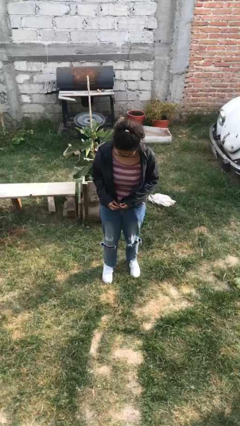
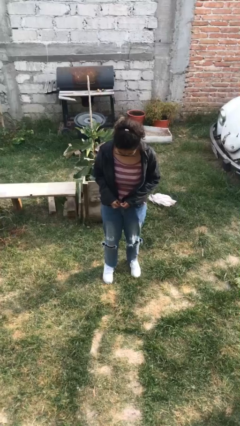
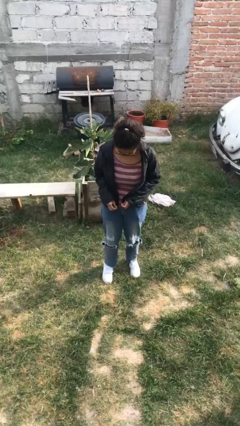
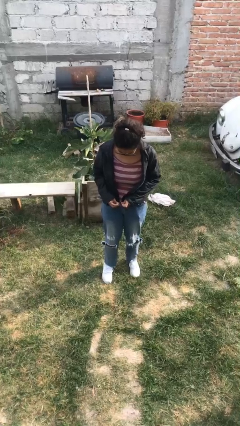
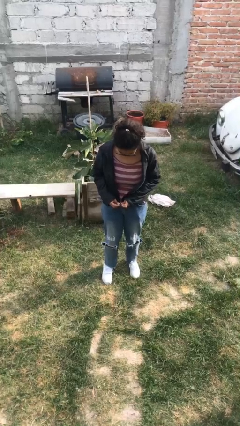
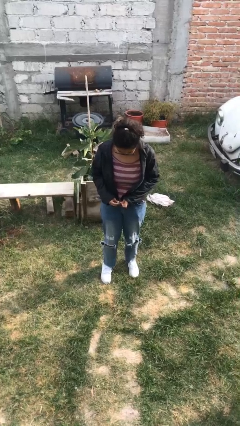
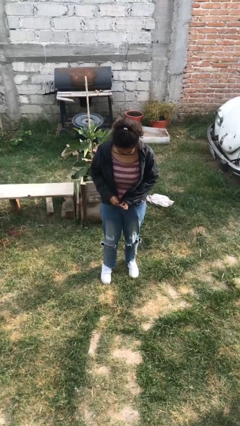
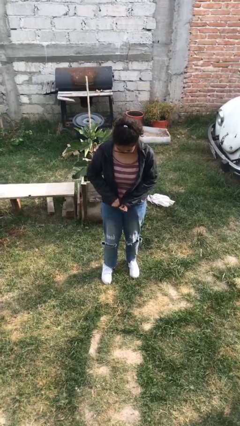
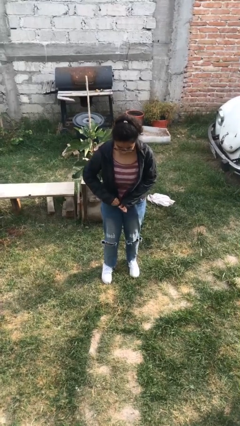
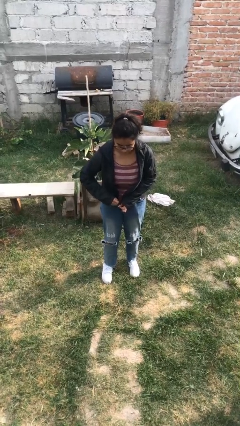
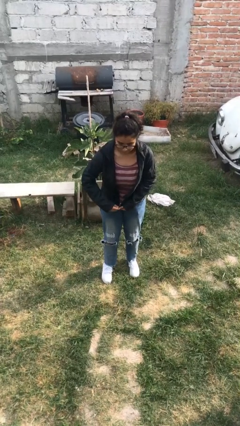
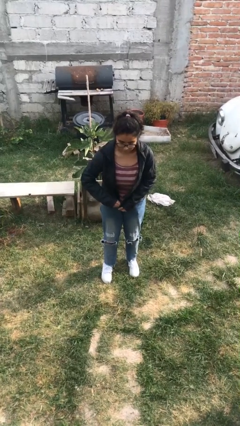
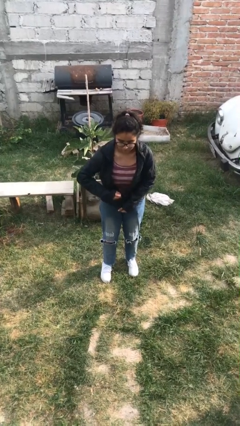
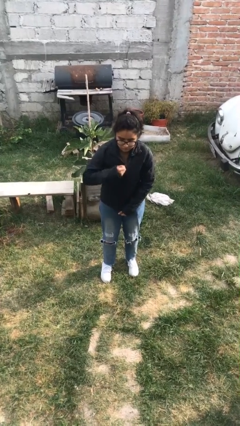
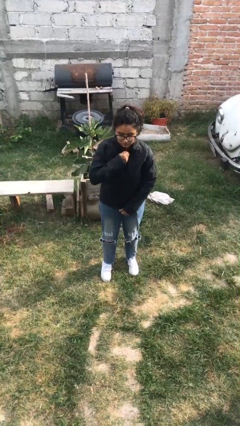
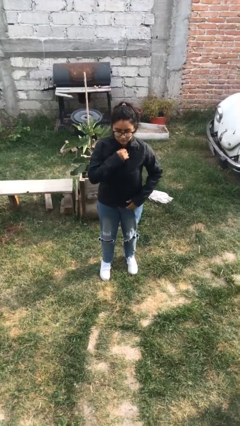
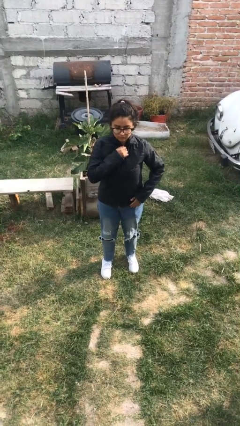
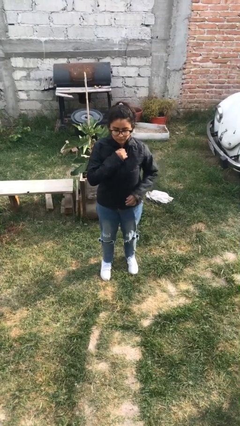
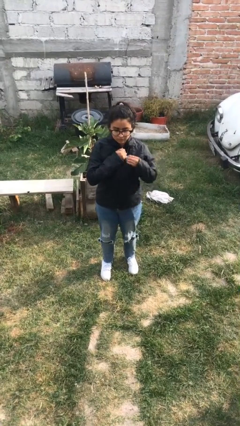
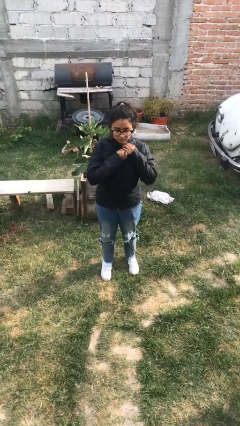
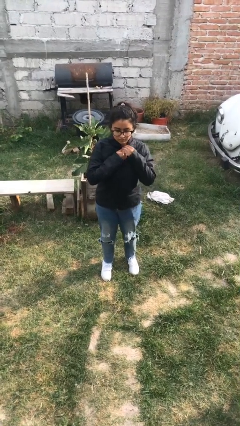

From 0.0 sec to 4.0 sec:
person zips up jacket

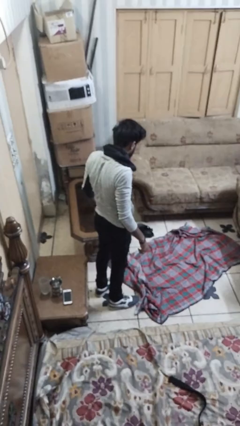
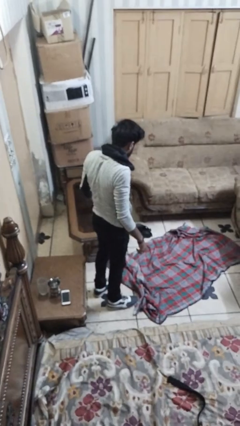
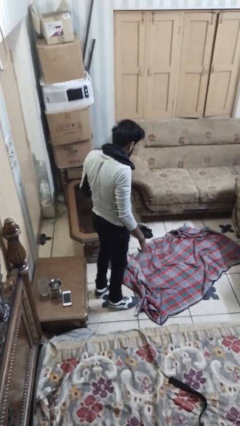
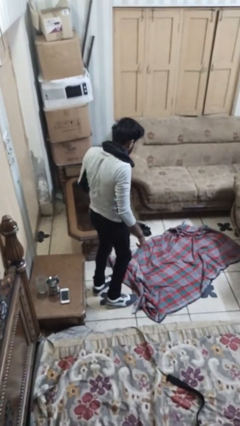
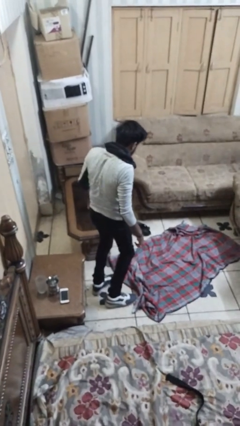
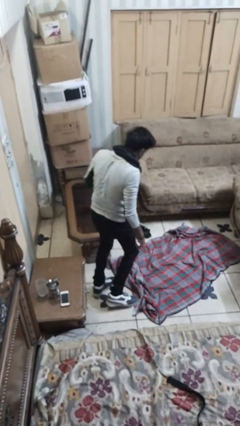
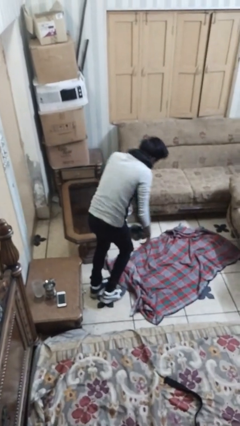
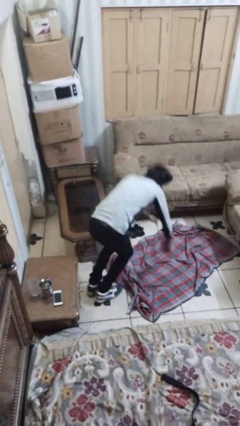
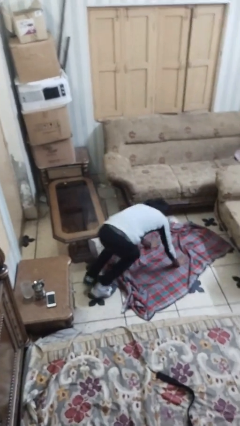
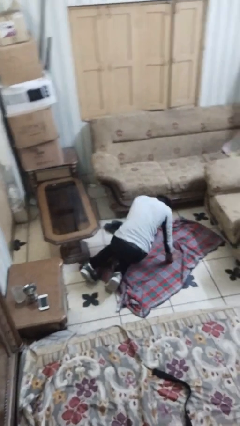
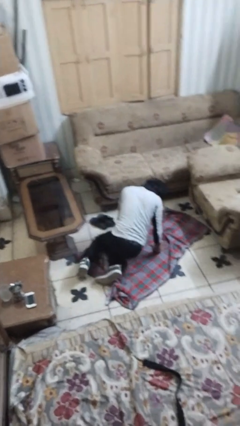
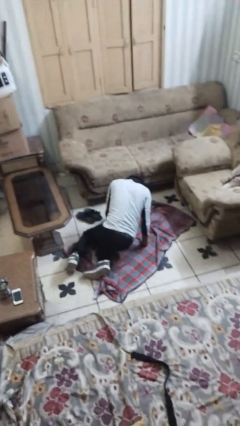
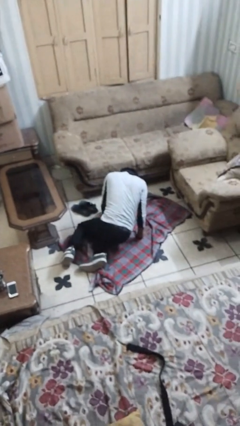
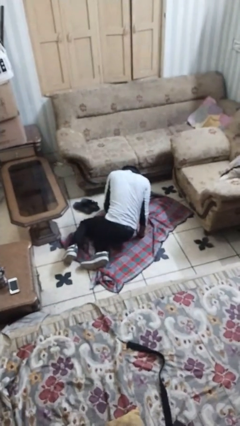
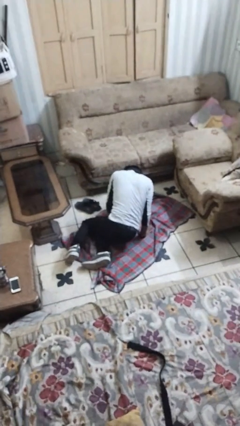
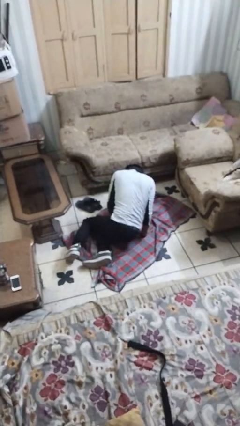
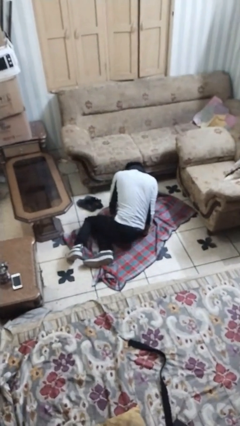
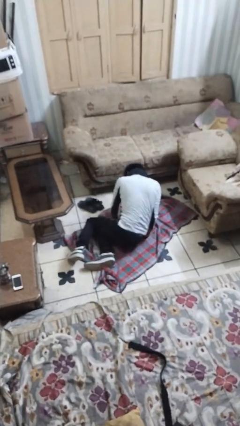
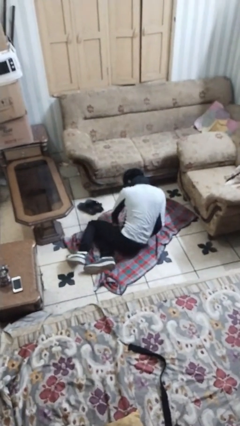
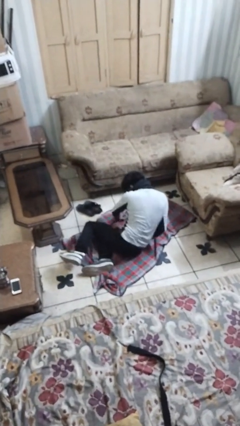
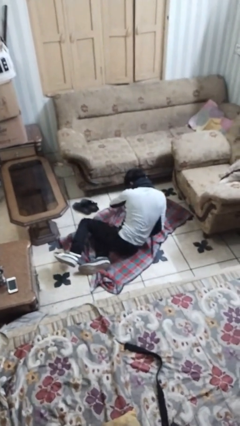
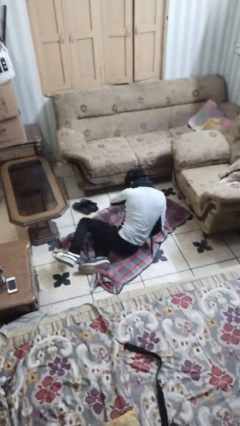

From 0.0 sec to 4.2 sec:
person trips on object on floor

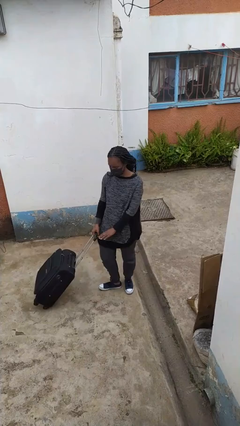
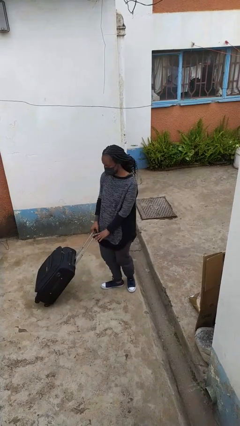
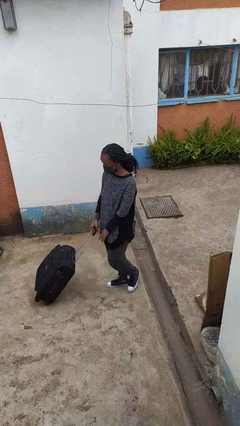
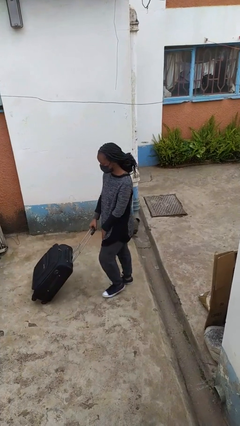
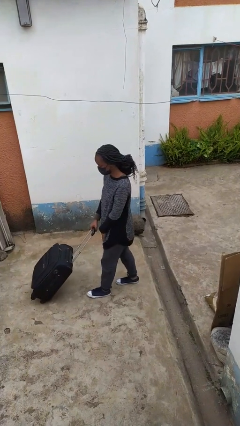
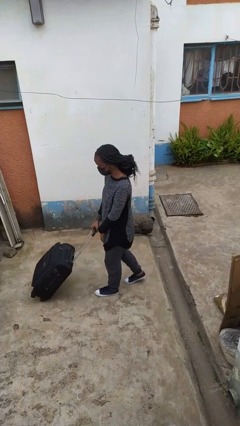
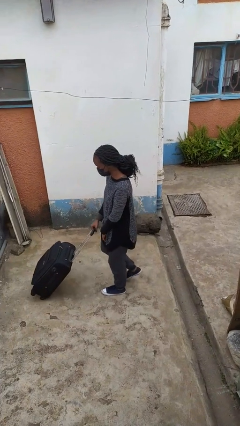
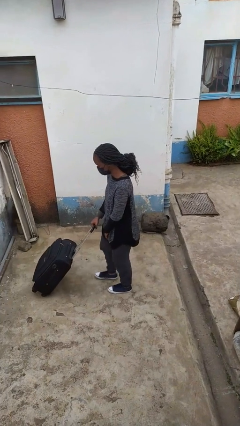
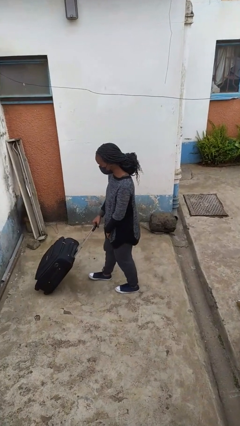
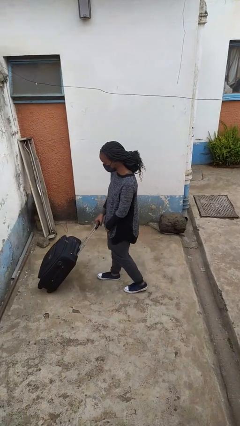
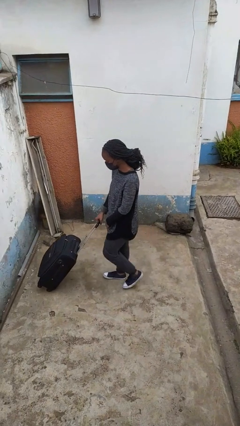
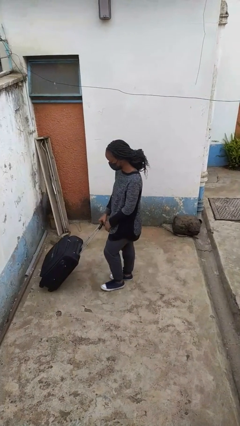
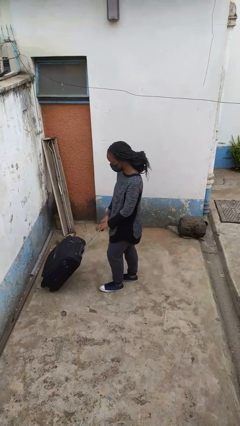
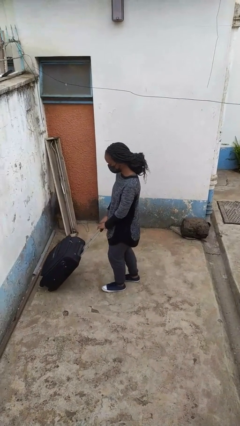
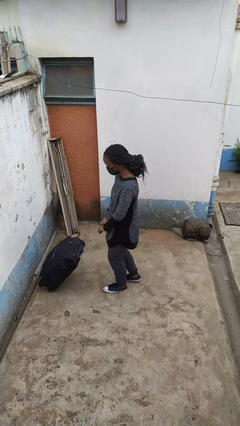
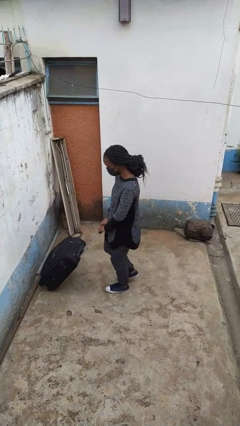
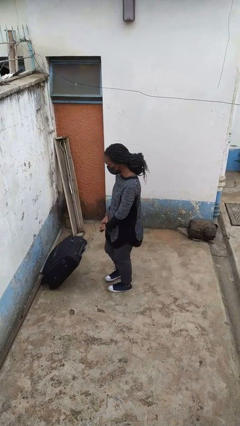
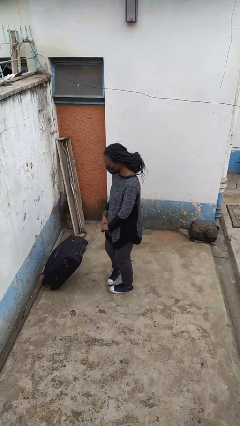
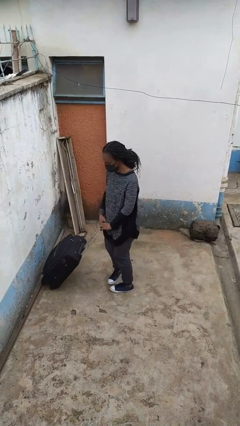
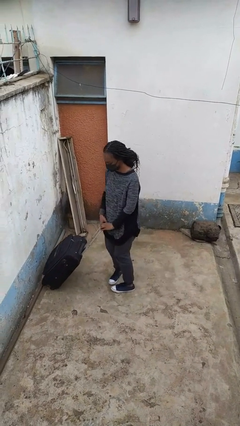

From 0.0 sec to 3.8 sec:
person pushes wheeled cart

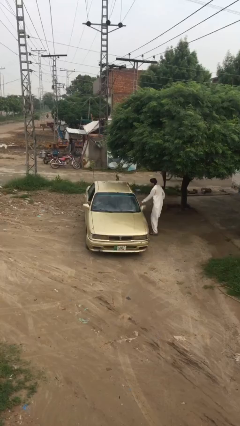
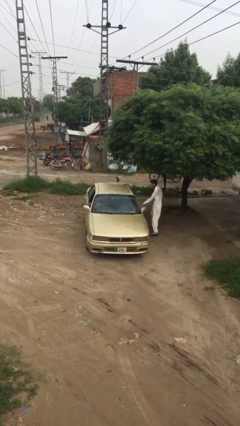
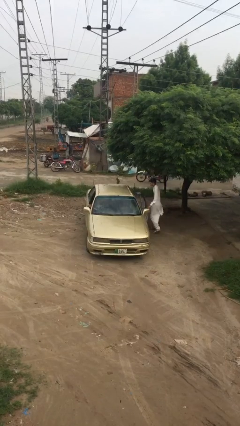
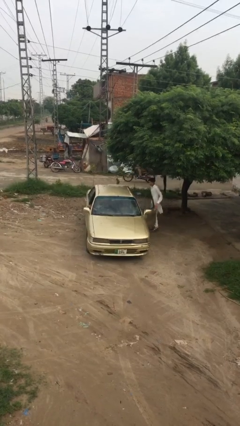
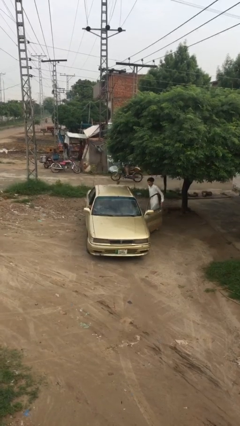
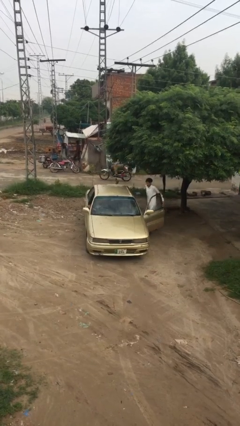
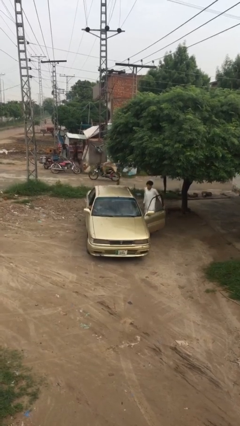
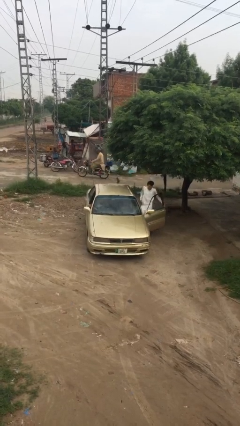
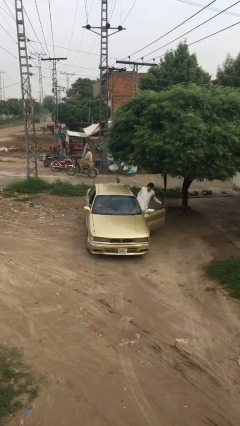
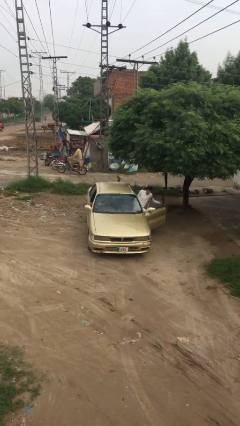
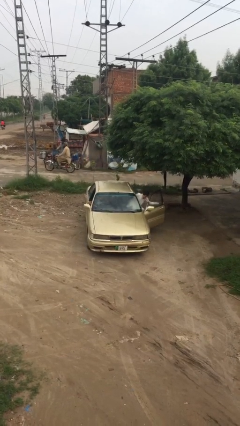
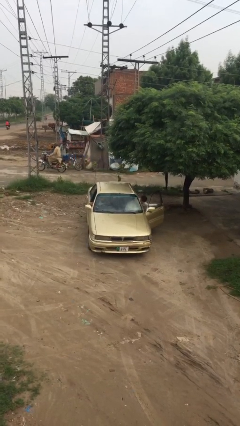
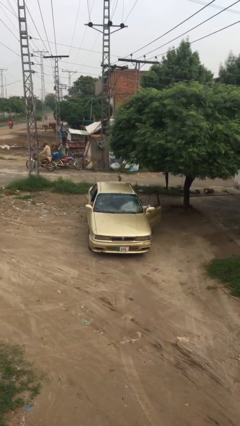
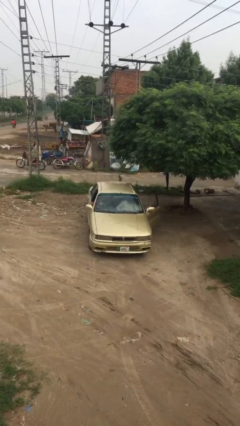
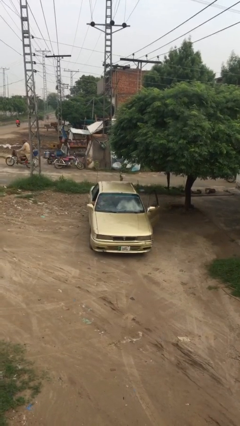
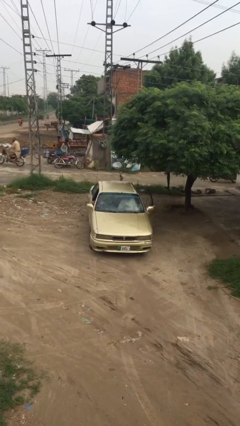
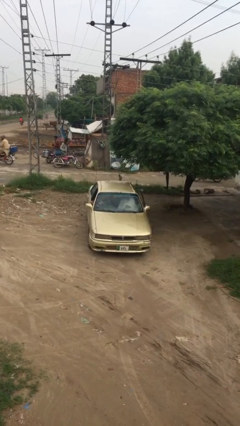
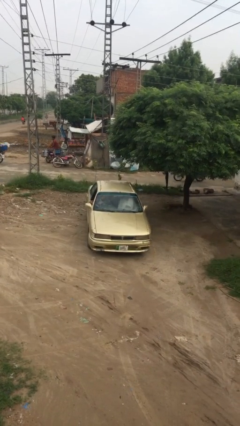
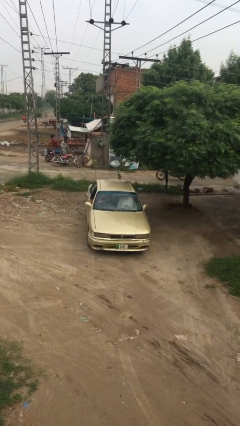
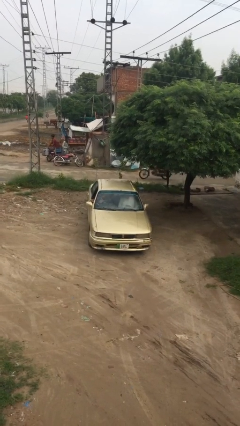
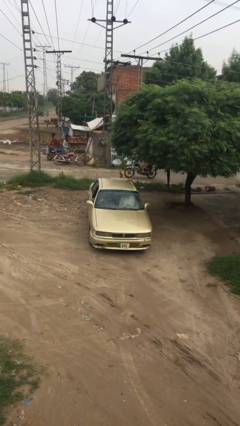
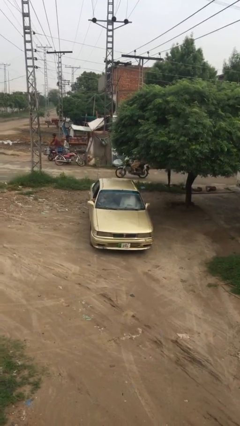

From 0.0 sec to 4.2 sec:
car picks up person

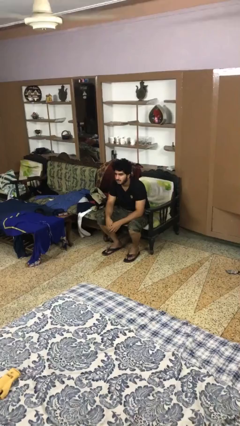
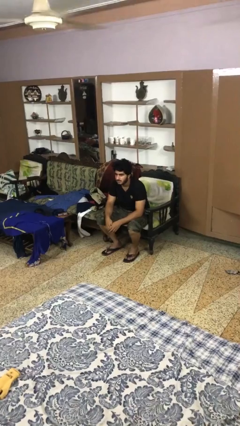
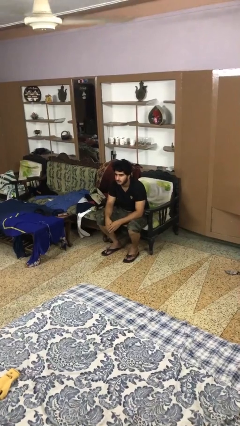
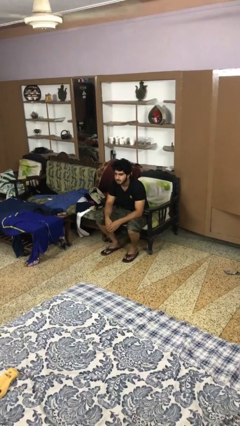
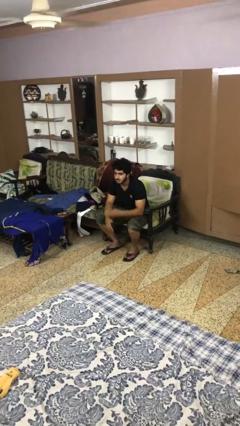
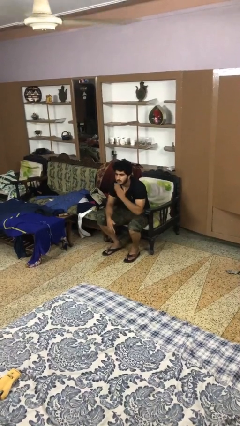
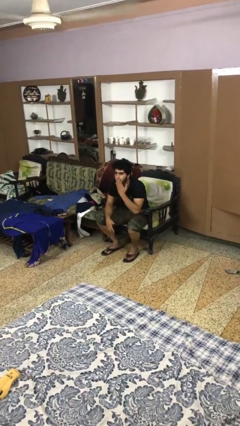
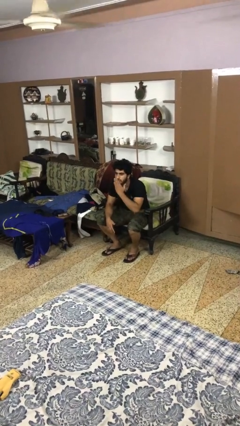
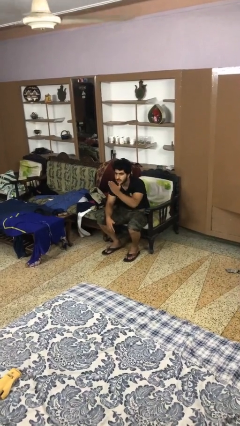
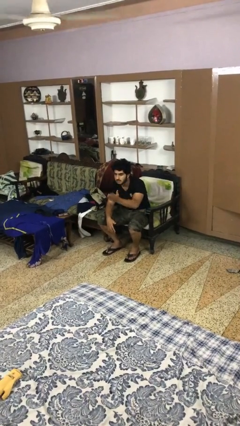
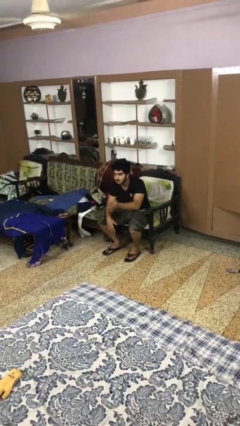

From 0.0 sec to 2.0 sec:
person gestures blow kiss
